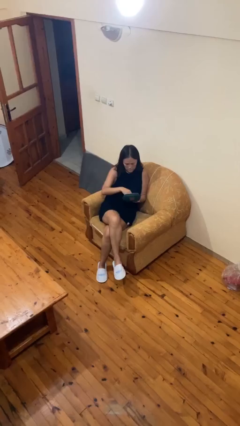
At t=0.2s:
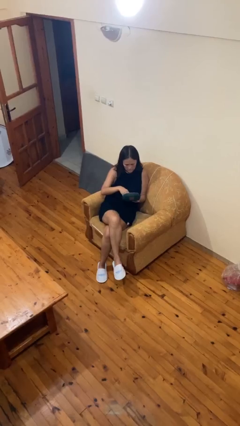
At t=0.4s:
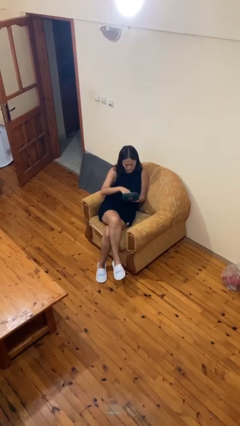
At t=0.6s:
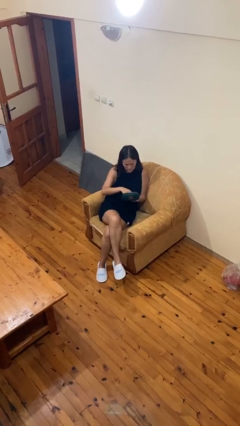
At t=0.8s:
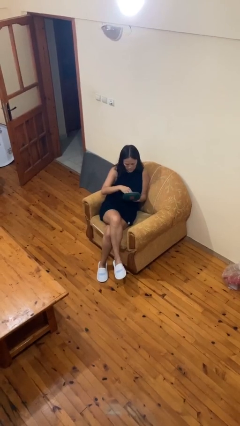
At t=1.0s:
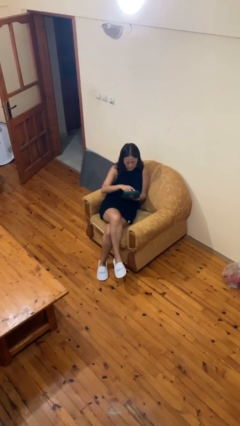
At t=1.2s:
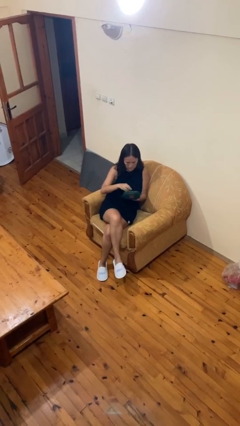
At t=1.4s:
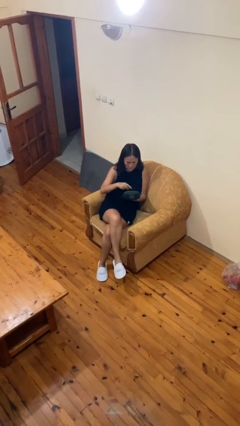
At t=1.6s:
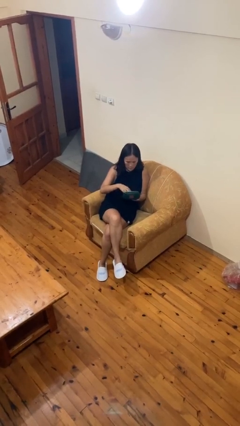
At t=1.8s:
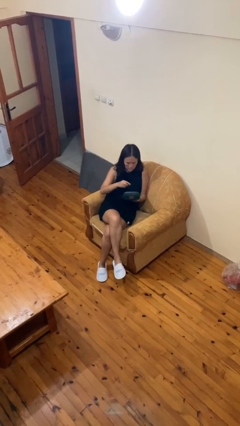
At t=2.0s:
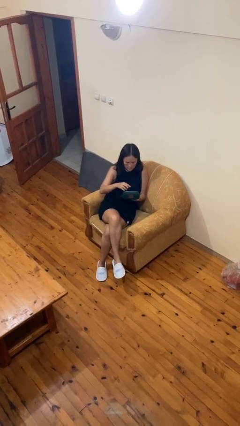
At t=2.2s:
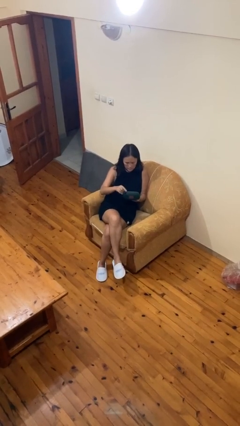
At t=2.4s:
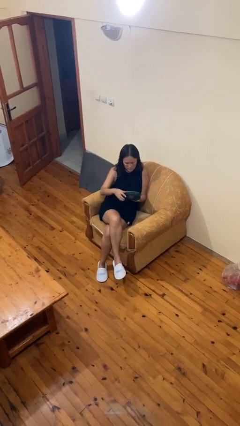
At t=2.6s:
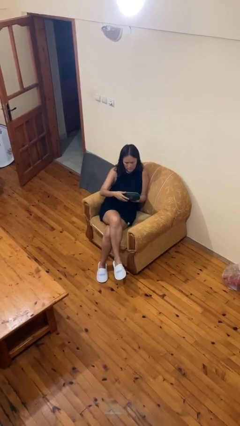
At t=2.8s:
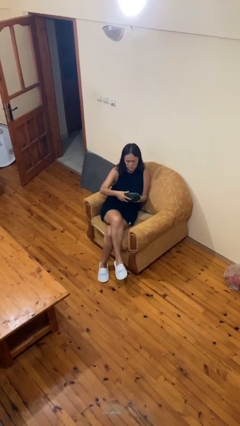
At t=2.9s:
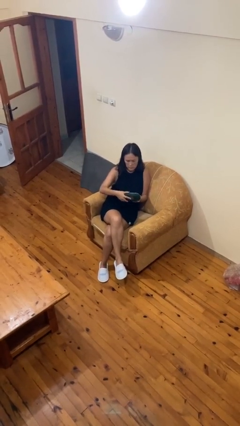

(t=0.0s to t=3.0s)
person searches jewelry box

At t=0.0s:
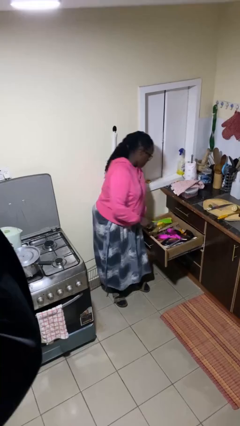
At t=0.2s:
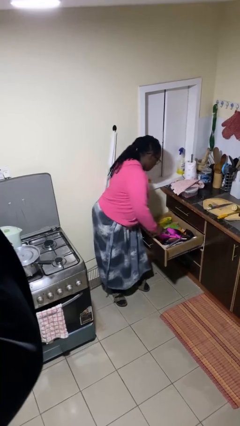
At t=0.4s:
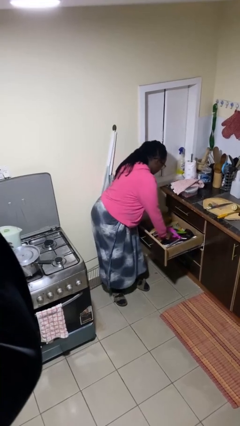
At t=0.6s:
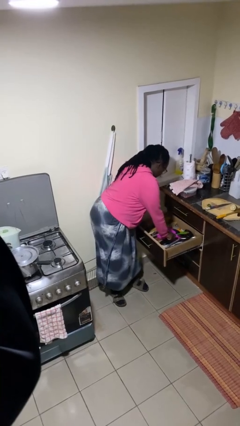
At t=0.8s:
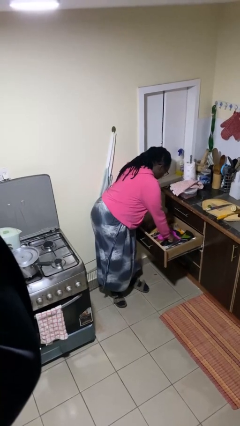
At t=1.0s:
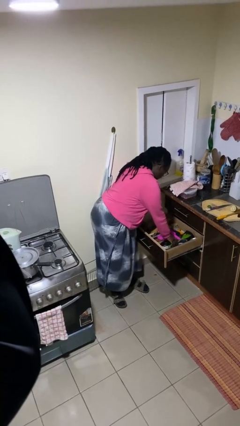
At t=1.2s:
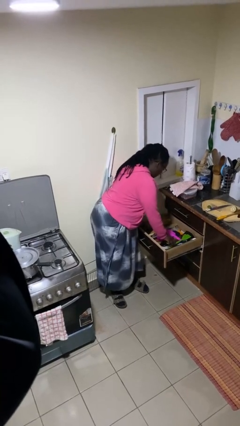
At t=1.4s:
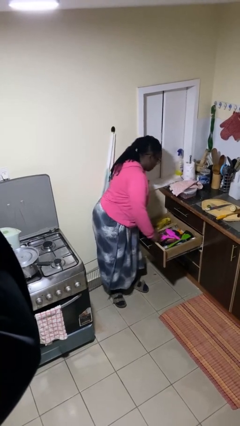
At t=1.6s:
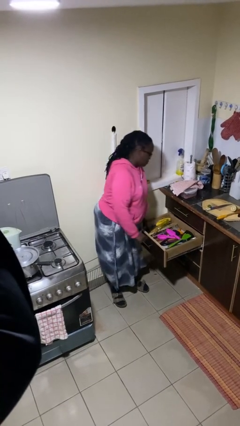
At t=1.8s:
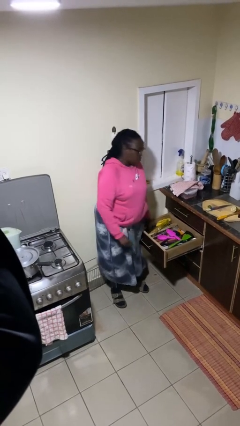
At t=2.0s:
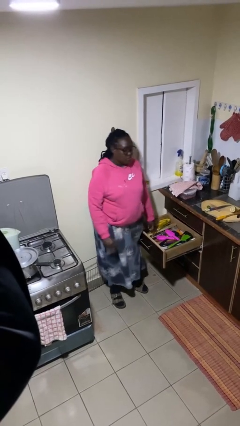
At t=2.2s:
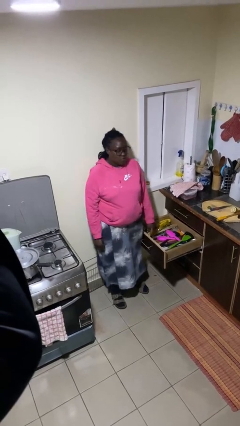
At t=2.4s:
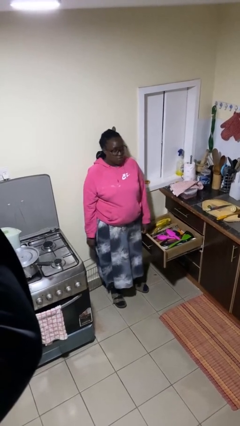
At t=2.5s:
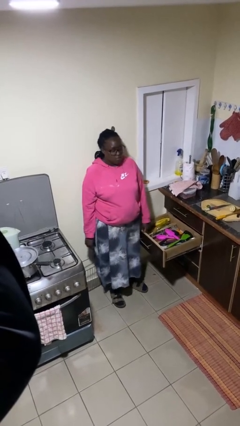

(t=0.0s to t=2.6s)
person puts object into kitchen drawer

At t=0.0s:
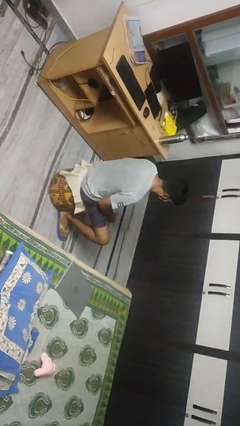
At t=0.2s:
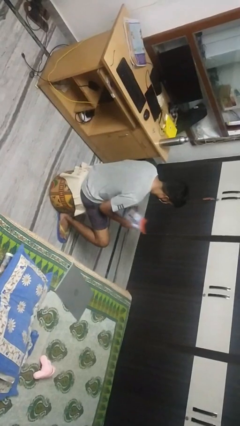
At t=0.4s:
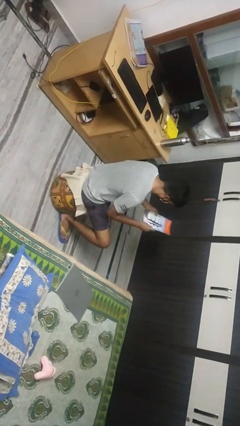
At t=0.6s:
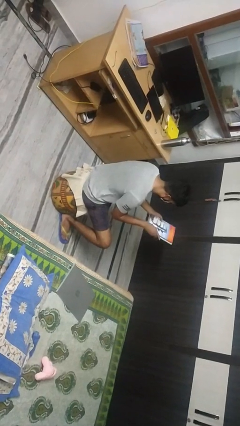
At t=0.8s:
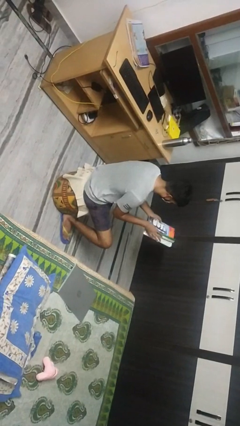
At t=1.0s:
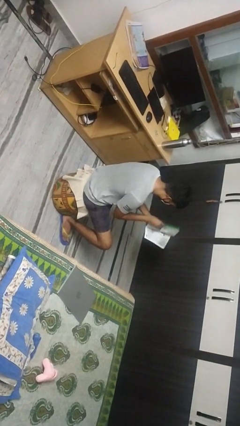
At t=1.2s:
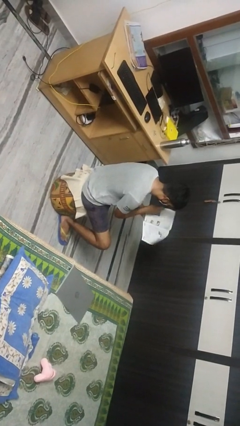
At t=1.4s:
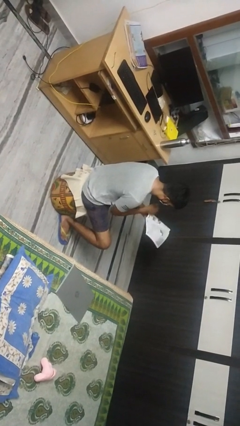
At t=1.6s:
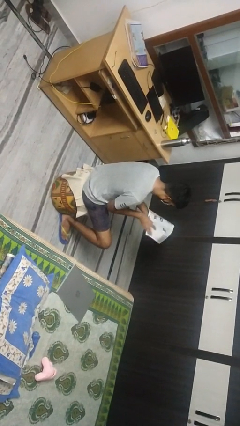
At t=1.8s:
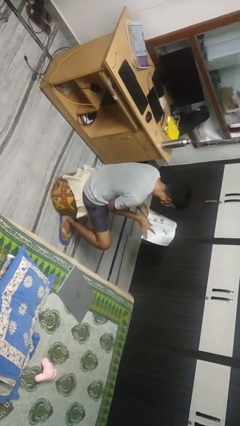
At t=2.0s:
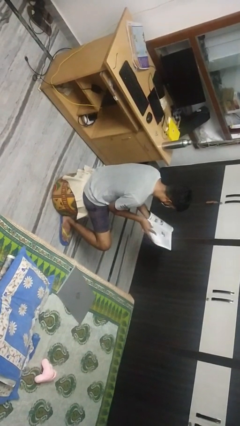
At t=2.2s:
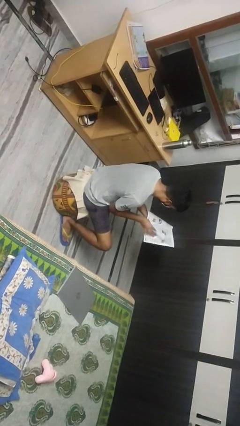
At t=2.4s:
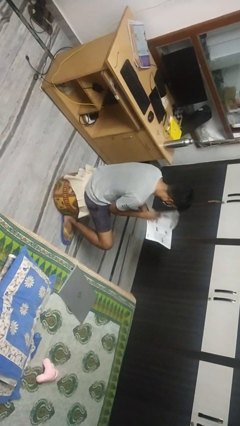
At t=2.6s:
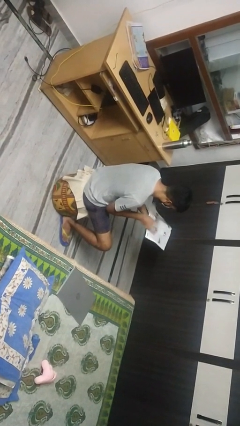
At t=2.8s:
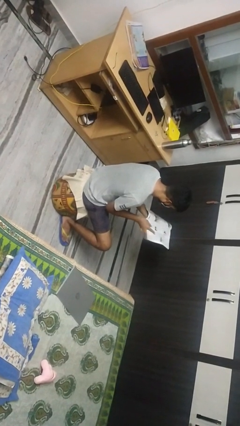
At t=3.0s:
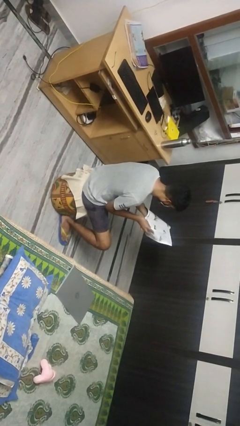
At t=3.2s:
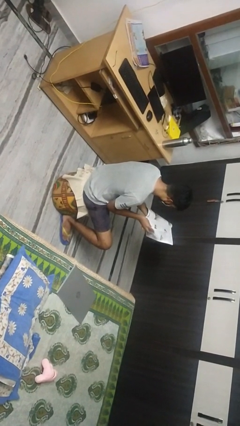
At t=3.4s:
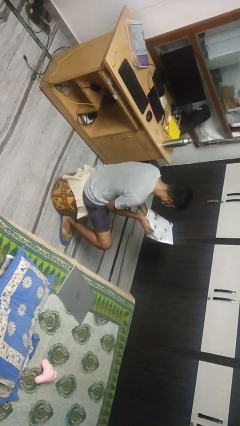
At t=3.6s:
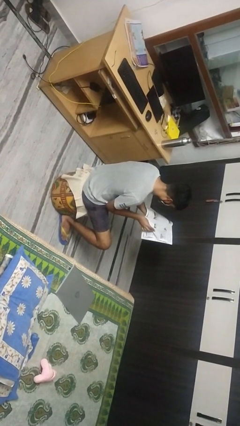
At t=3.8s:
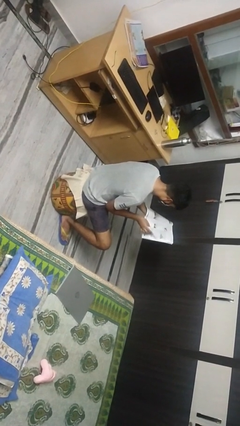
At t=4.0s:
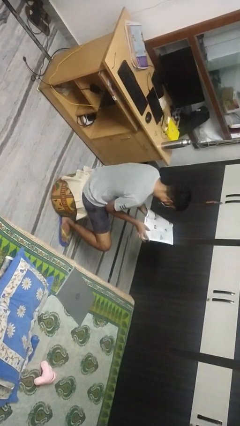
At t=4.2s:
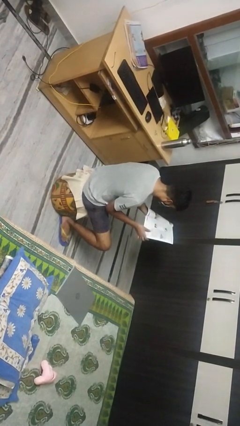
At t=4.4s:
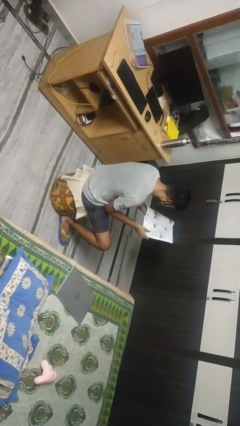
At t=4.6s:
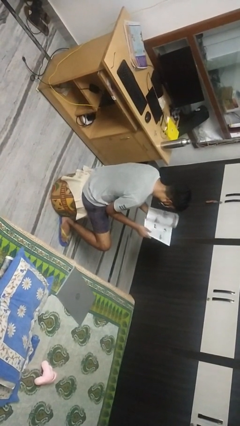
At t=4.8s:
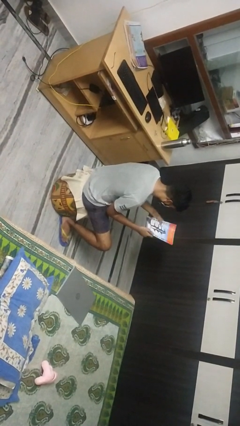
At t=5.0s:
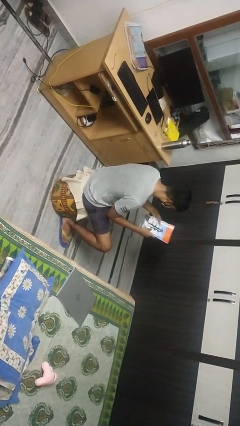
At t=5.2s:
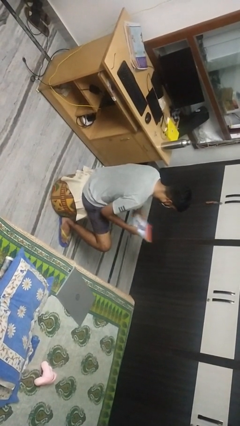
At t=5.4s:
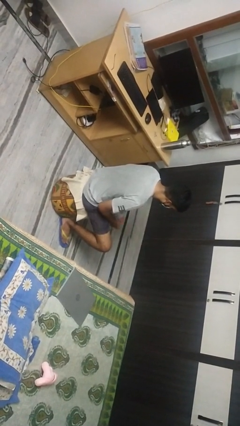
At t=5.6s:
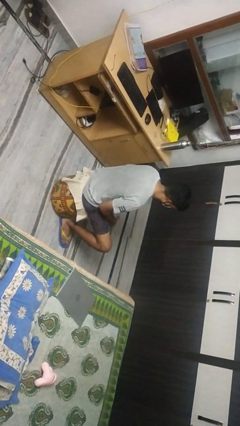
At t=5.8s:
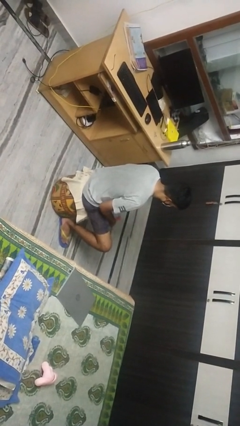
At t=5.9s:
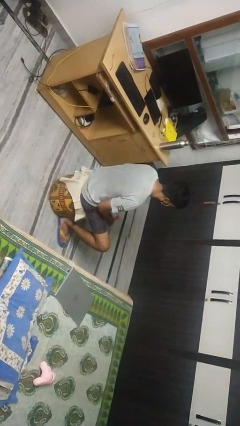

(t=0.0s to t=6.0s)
person reads magazine

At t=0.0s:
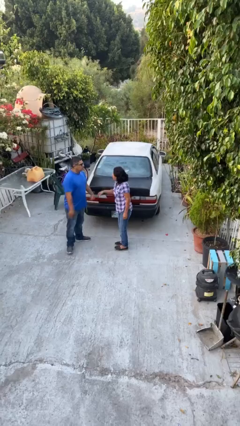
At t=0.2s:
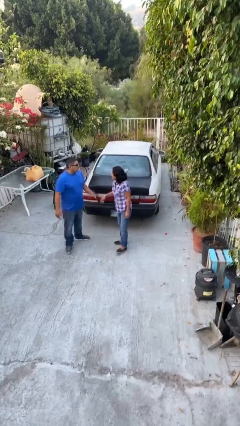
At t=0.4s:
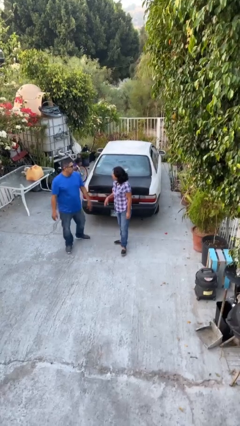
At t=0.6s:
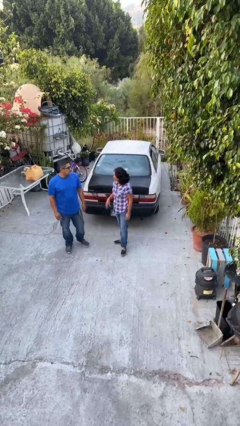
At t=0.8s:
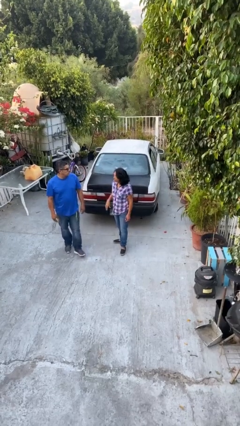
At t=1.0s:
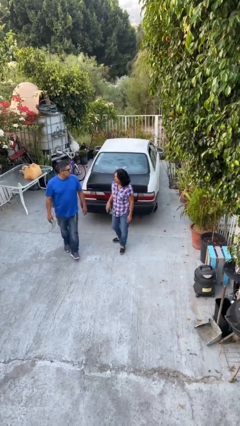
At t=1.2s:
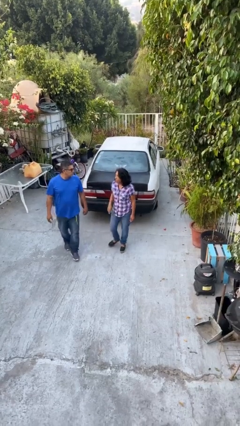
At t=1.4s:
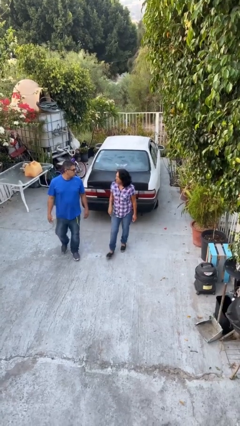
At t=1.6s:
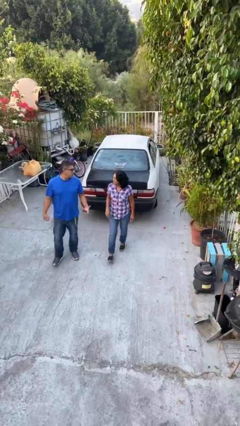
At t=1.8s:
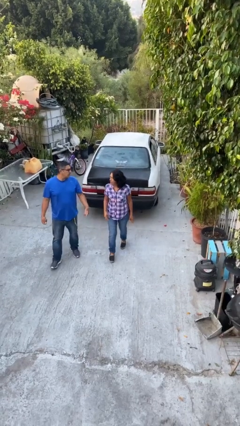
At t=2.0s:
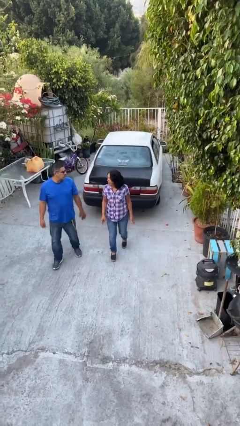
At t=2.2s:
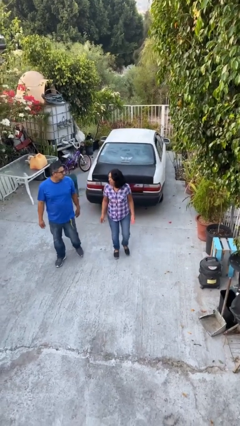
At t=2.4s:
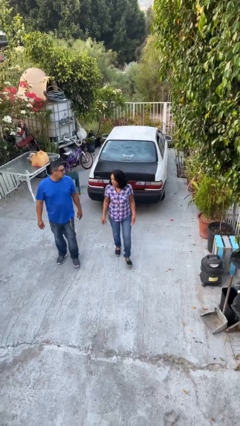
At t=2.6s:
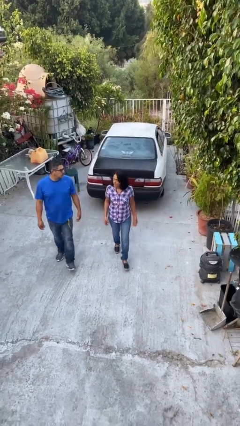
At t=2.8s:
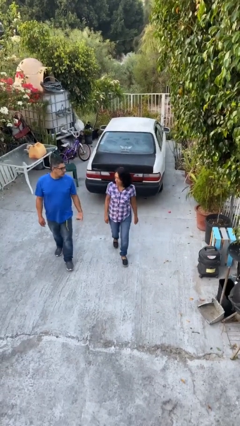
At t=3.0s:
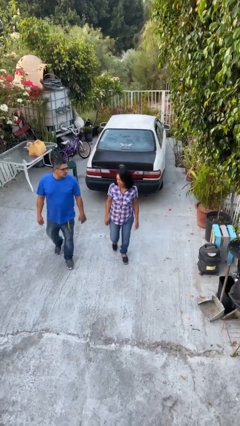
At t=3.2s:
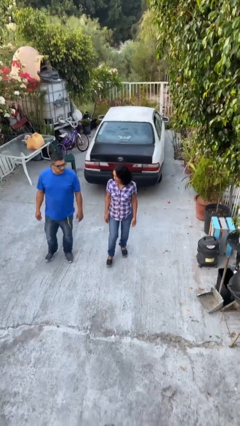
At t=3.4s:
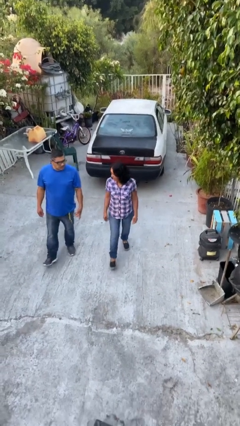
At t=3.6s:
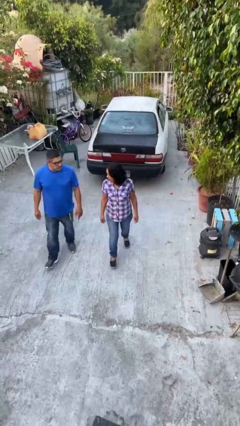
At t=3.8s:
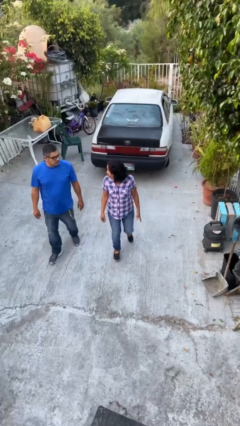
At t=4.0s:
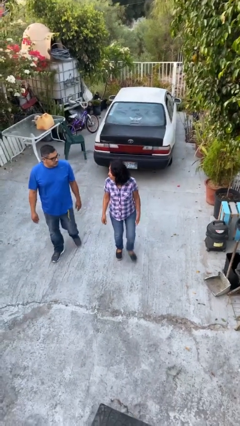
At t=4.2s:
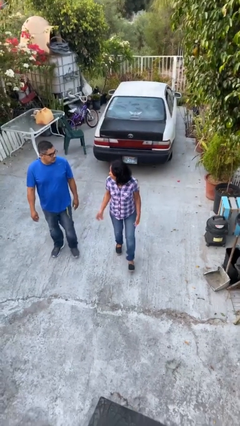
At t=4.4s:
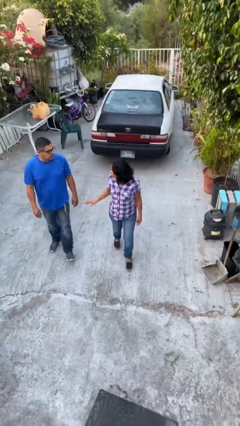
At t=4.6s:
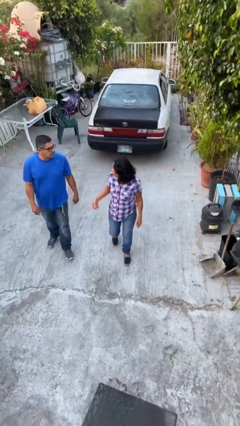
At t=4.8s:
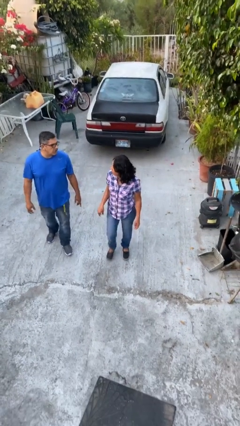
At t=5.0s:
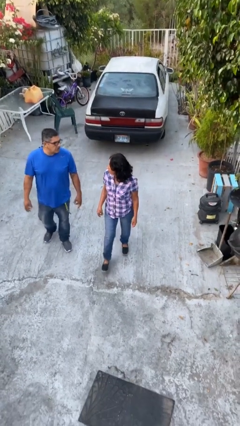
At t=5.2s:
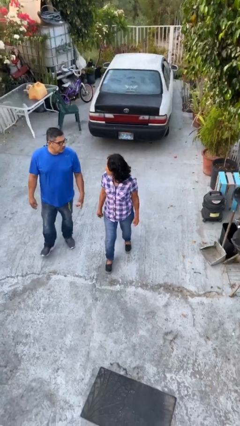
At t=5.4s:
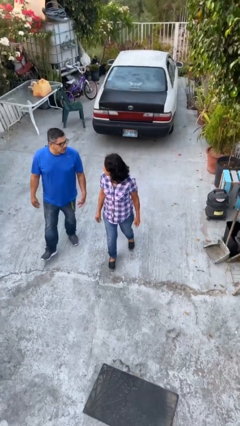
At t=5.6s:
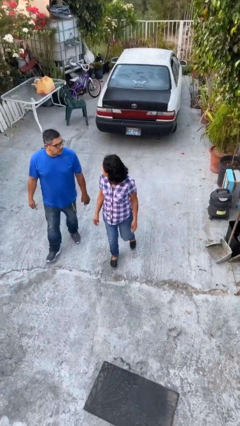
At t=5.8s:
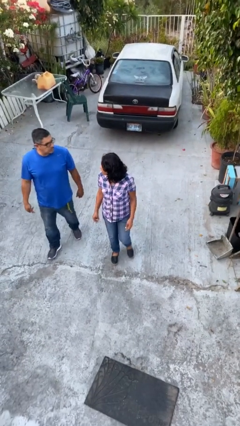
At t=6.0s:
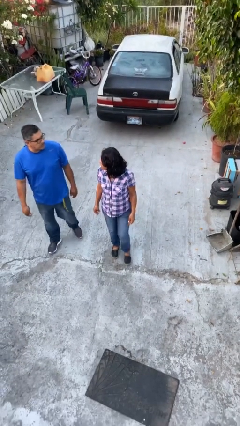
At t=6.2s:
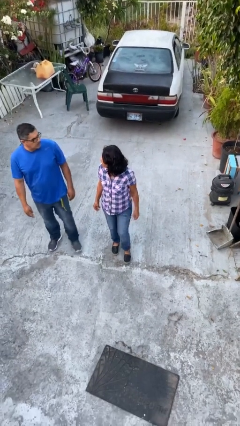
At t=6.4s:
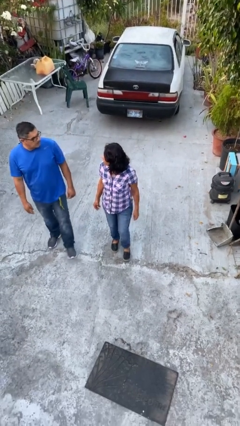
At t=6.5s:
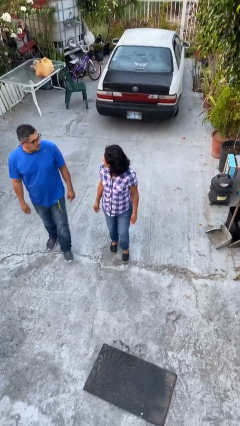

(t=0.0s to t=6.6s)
person talks to person
